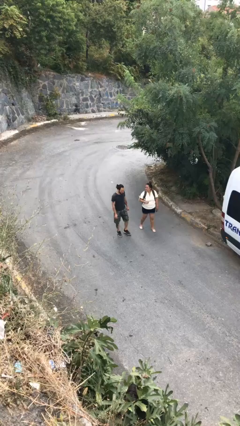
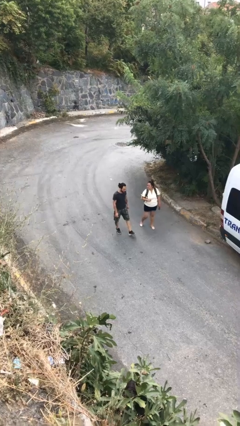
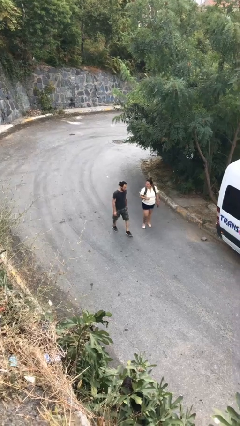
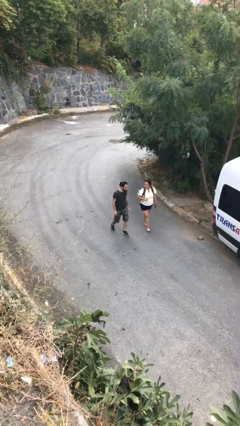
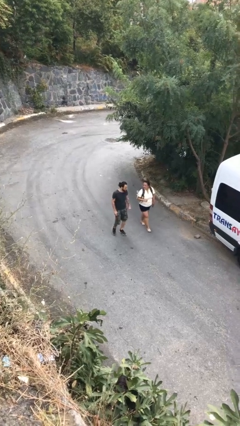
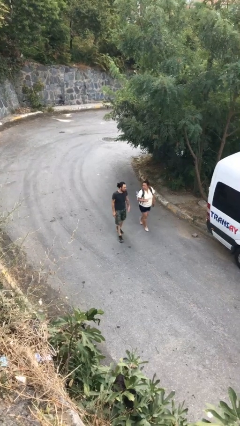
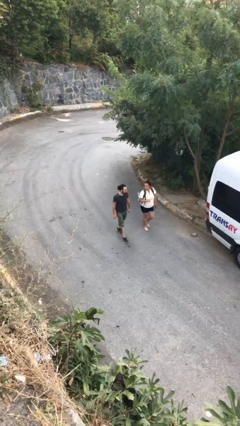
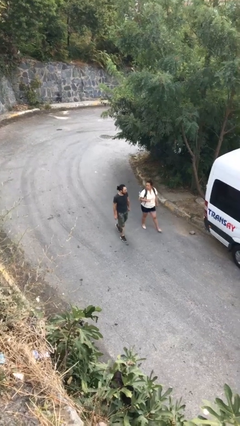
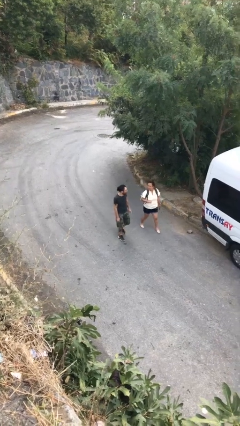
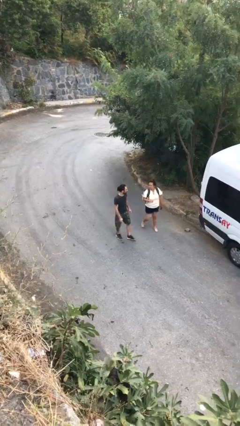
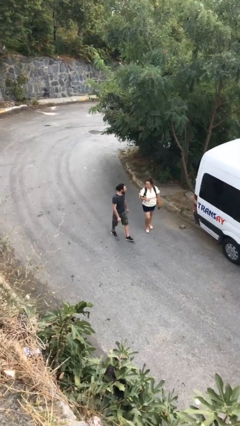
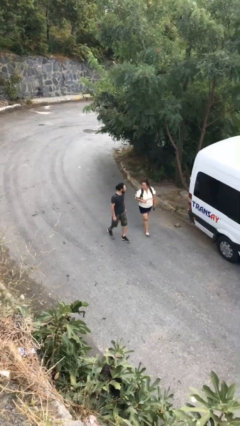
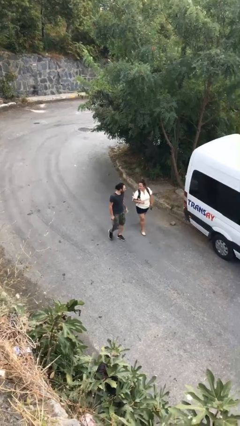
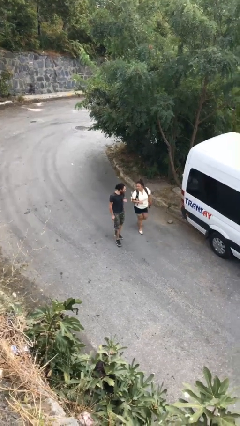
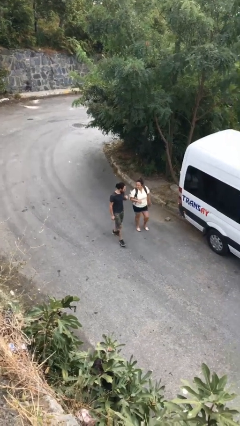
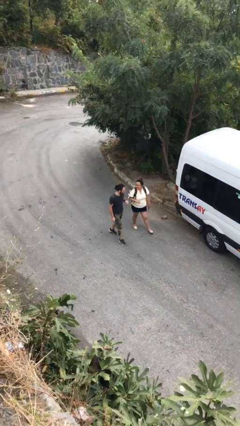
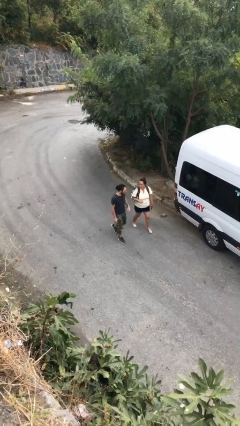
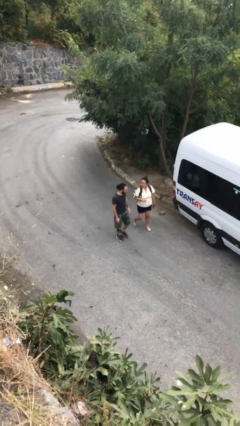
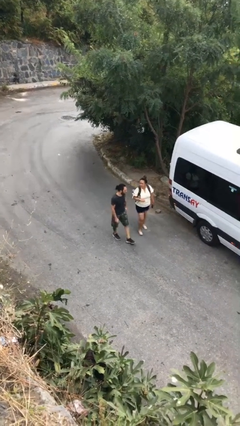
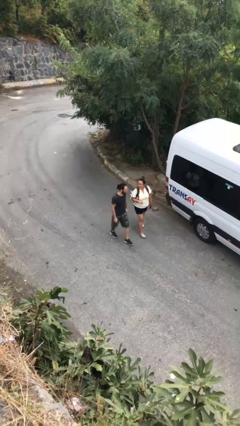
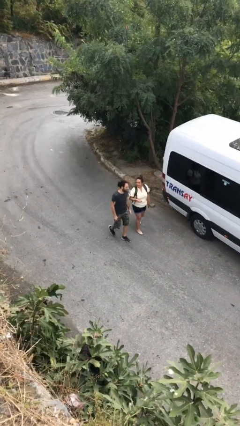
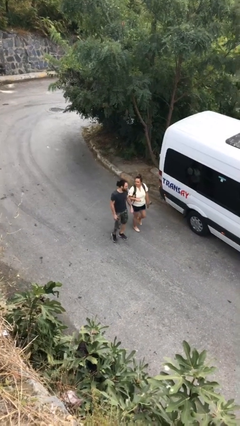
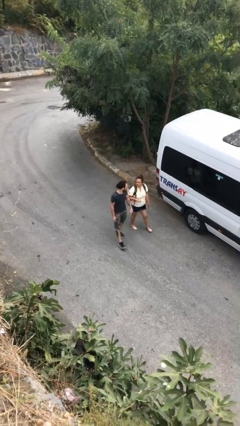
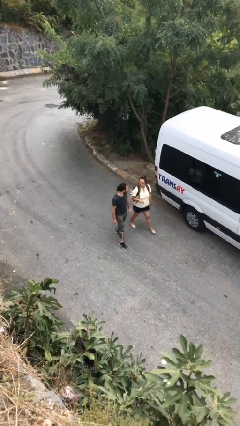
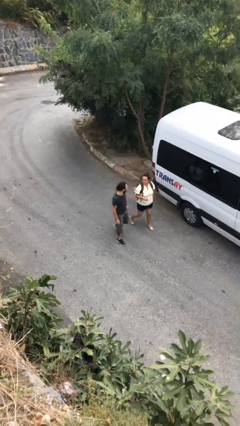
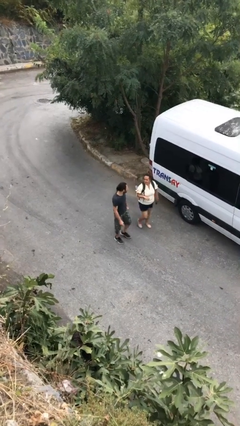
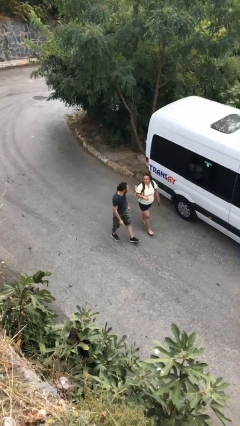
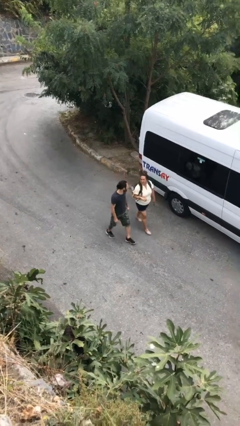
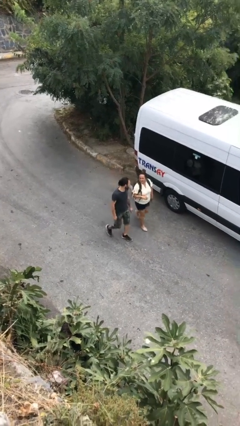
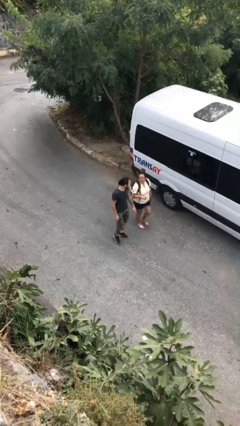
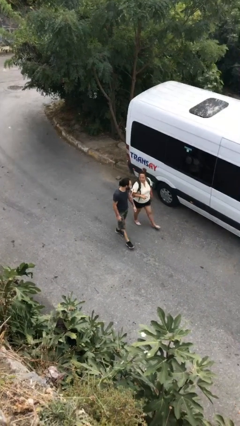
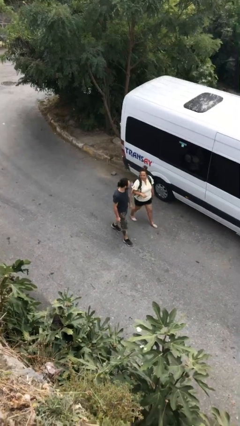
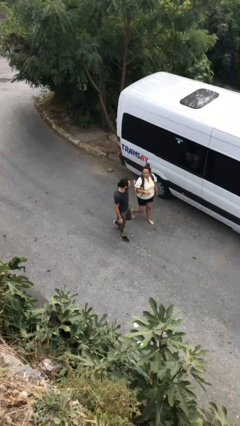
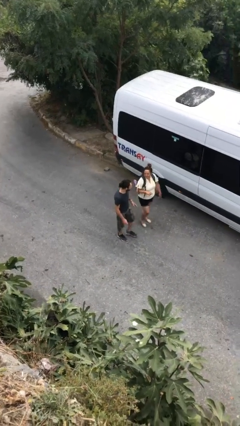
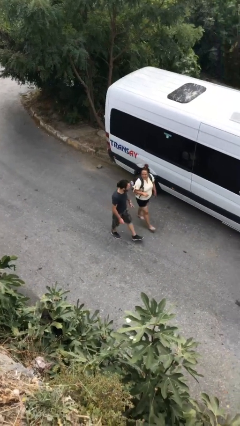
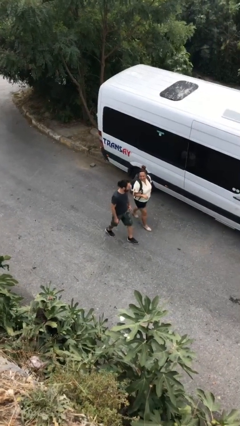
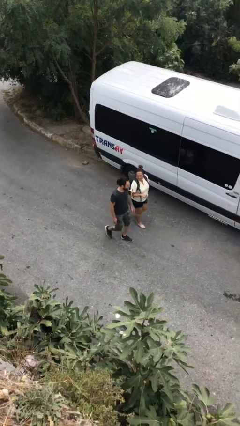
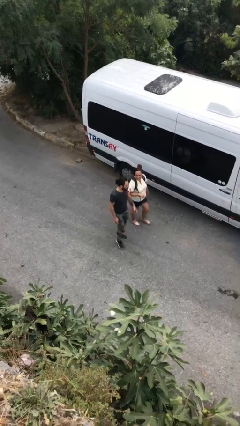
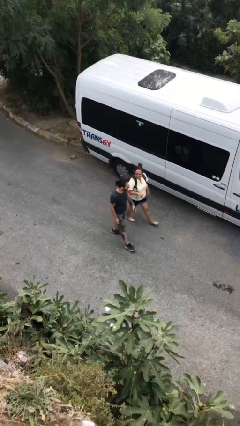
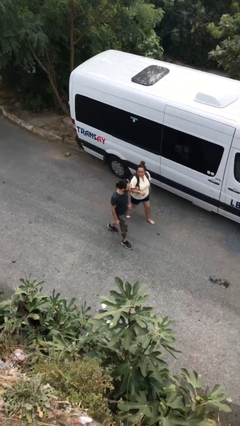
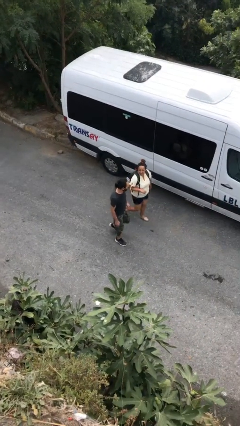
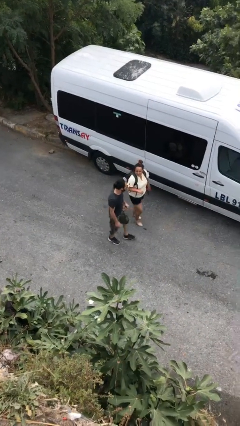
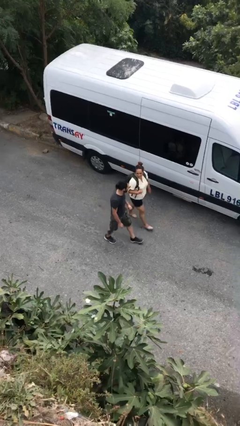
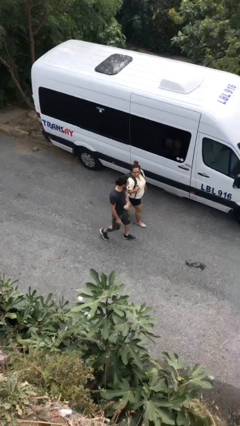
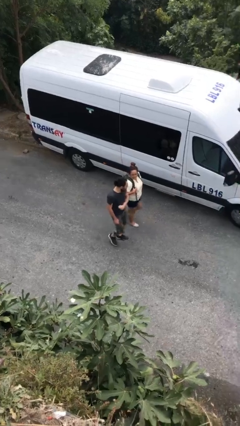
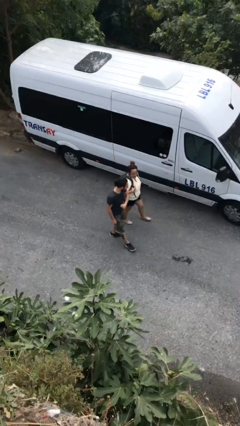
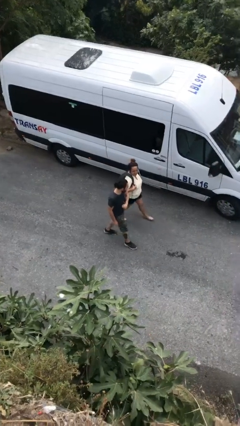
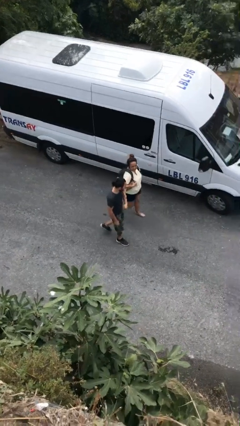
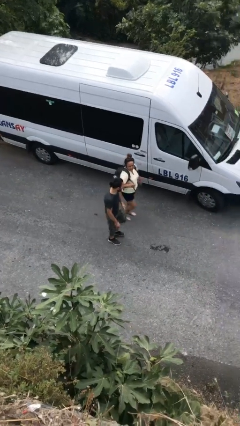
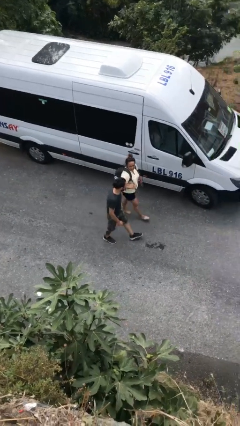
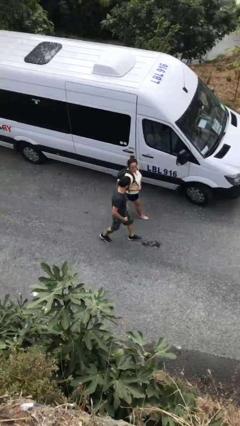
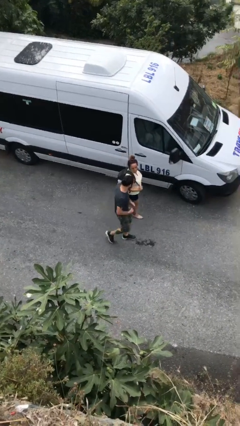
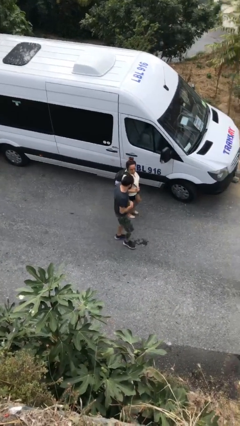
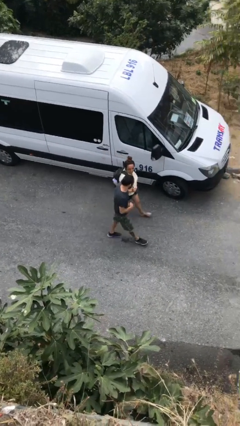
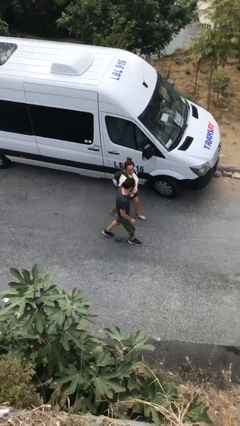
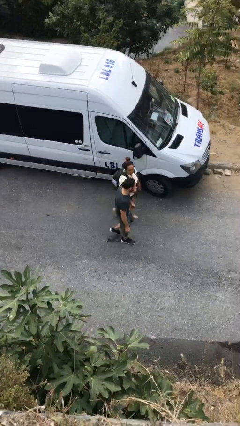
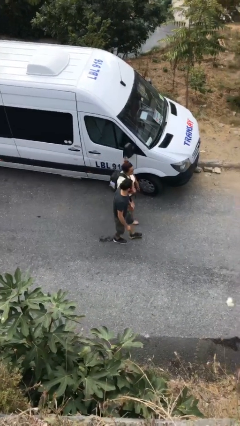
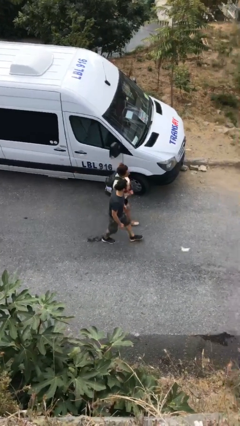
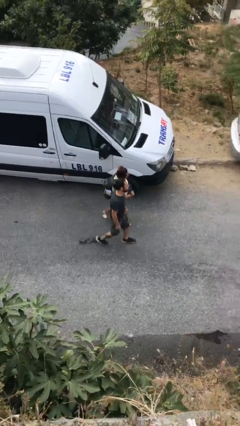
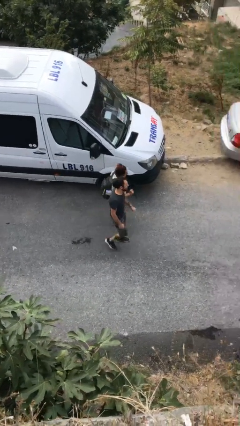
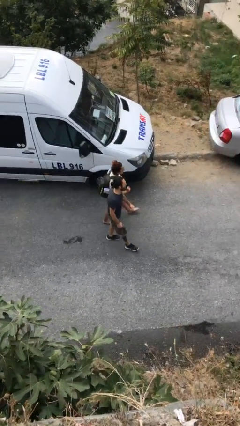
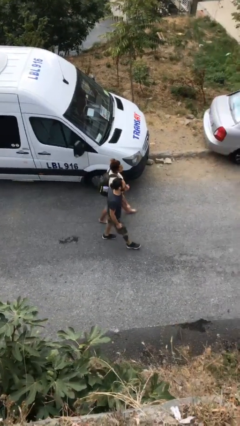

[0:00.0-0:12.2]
person talks to person

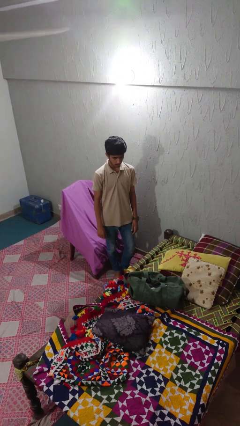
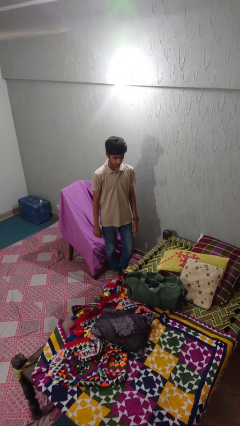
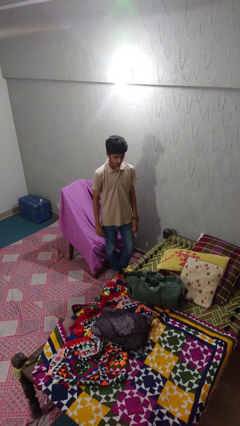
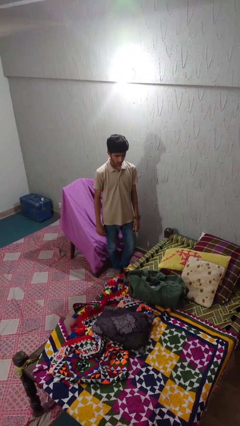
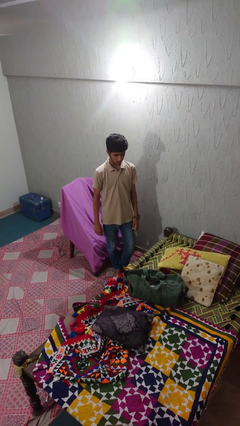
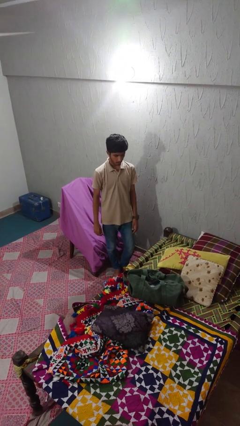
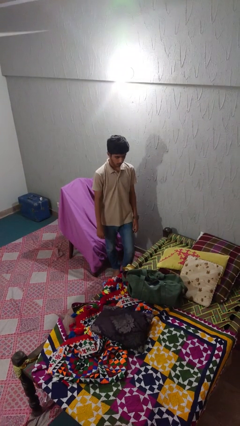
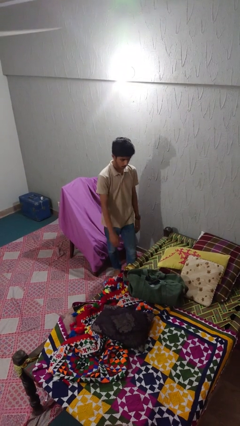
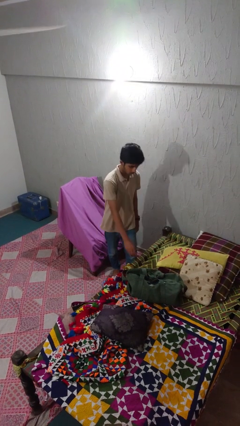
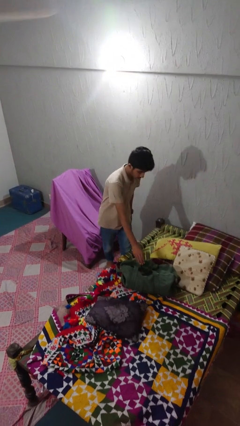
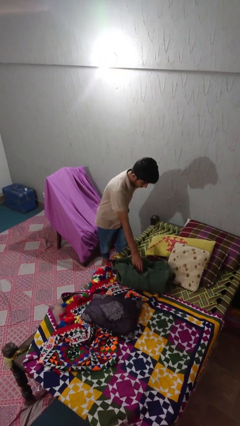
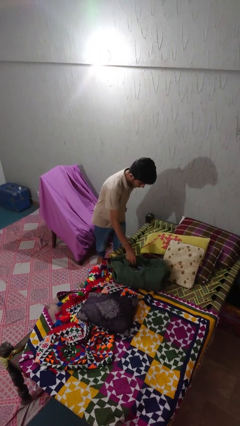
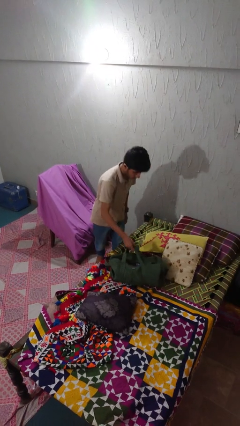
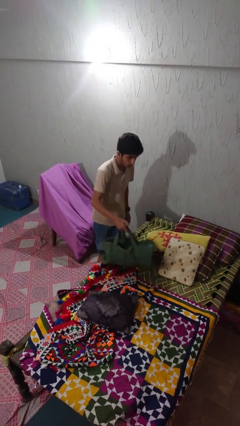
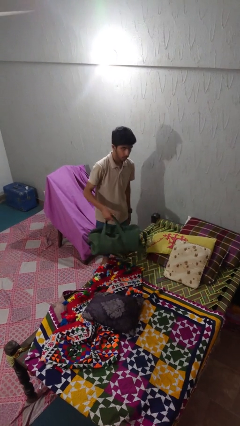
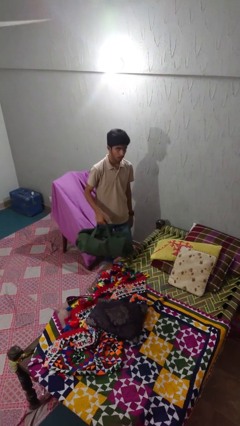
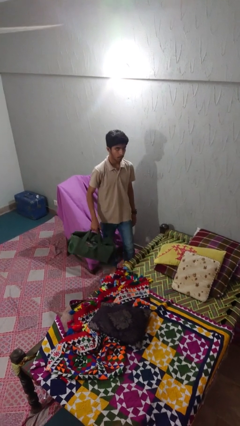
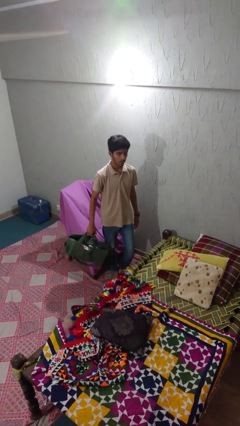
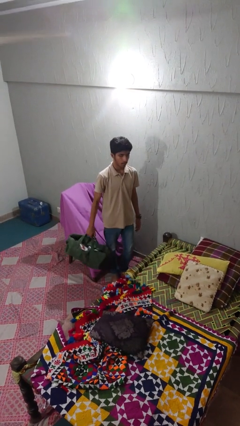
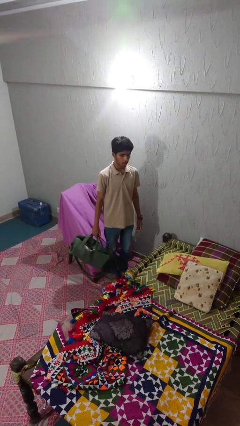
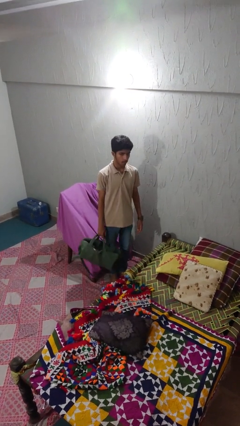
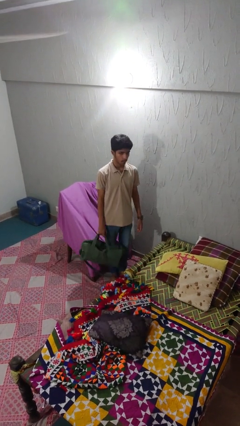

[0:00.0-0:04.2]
person picks up object from bed

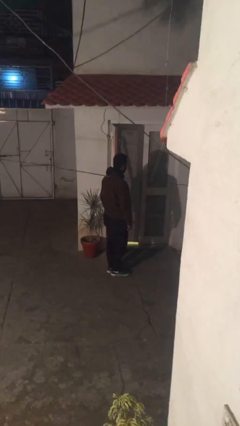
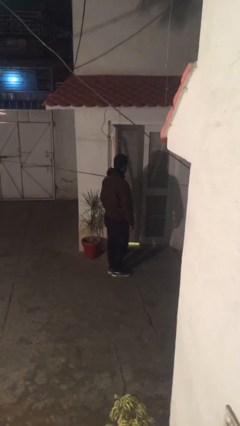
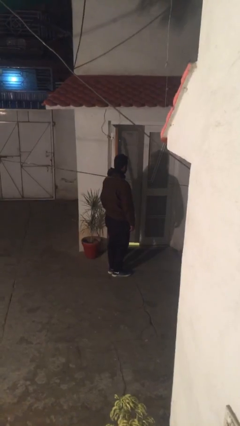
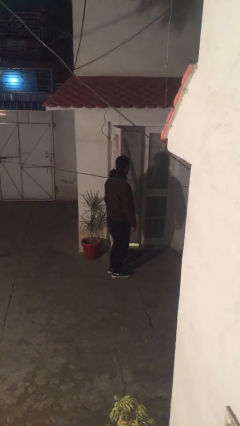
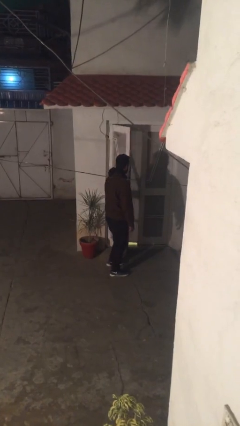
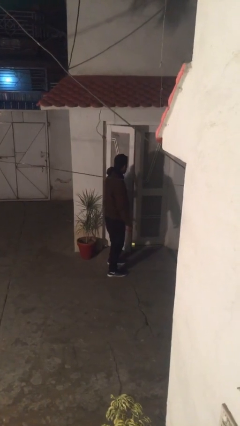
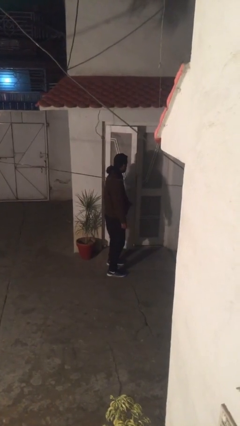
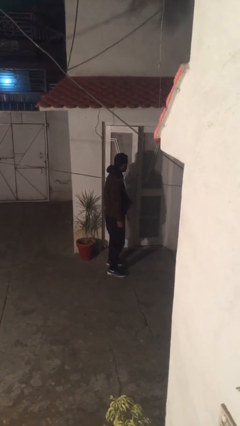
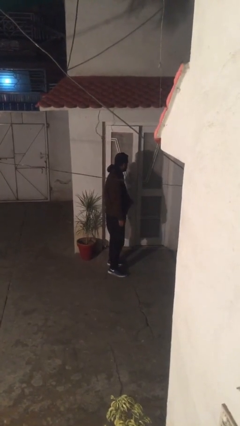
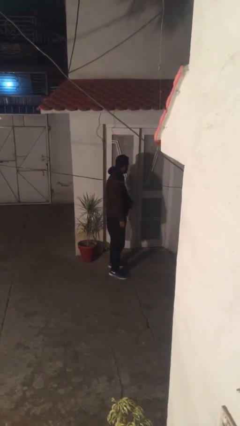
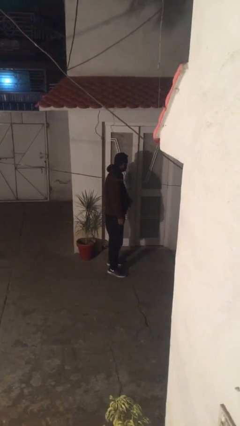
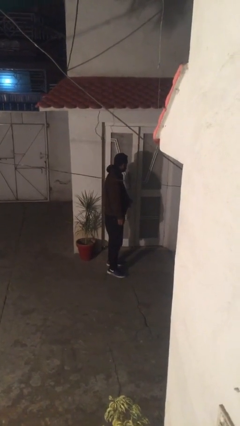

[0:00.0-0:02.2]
person closes facility door
